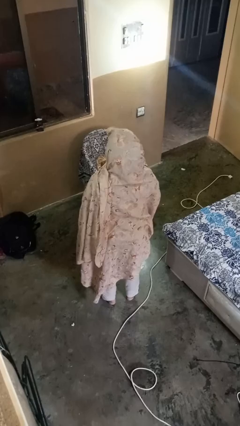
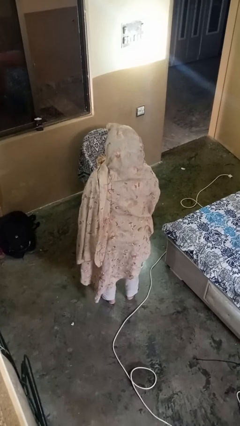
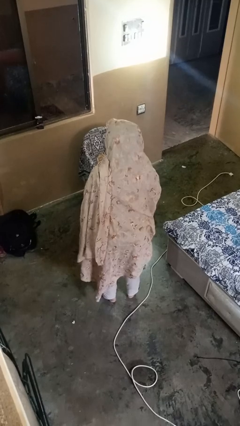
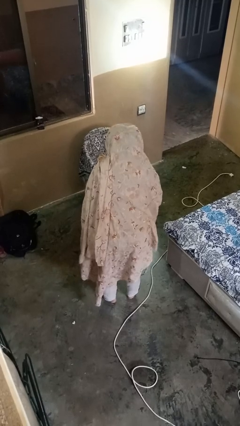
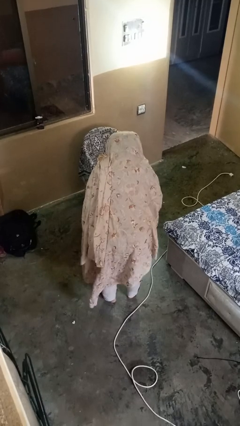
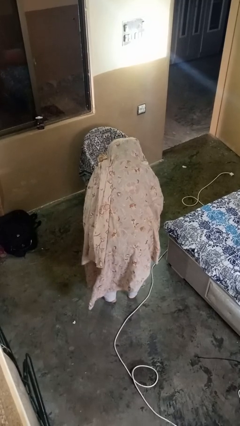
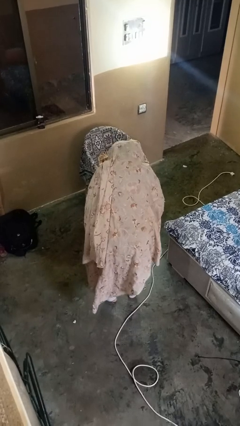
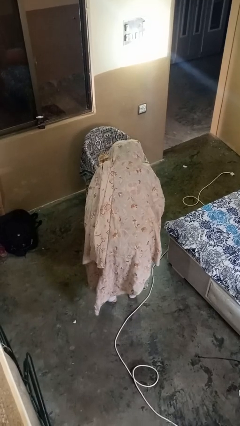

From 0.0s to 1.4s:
person bows

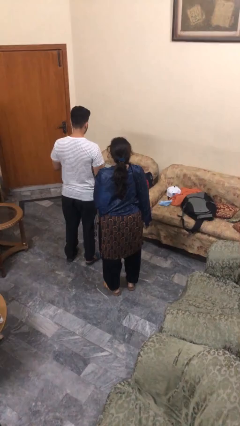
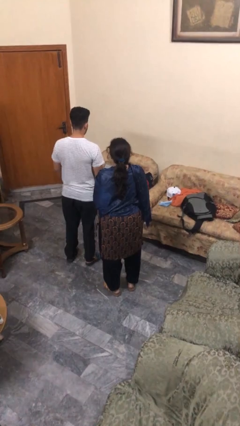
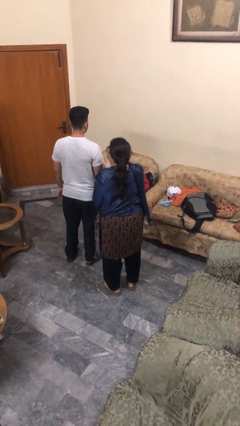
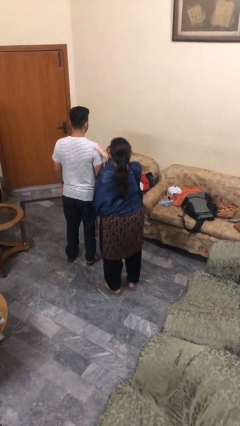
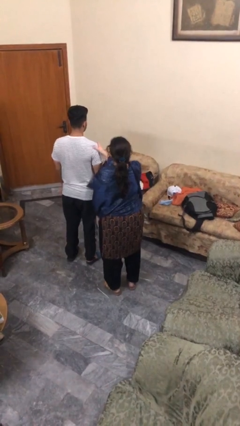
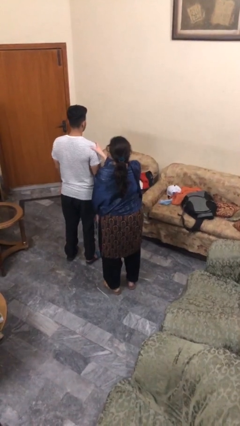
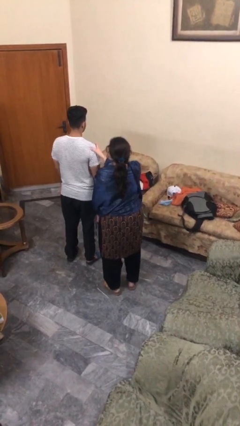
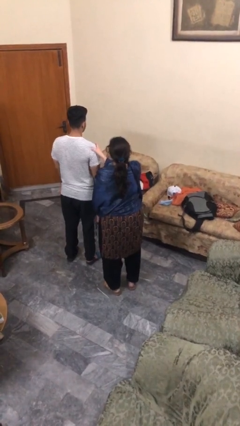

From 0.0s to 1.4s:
person grabs person by shoulder

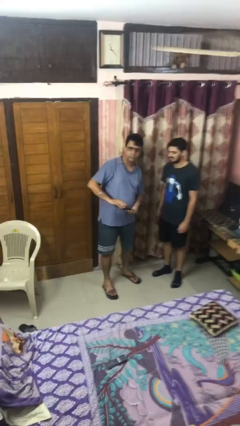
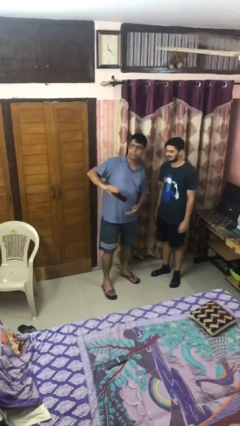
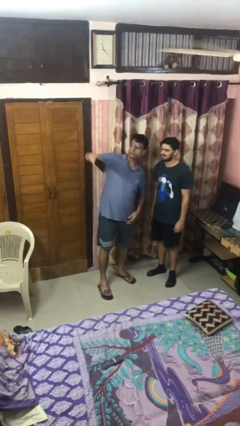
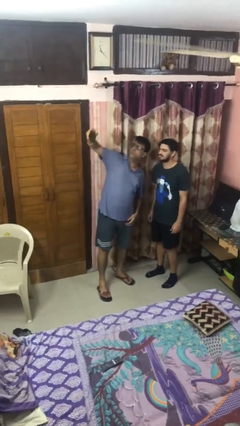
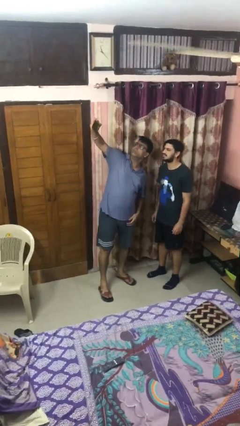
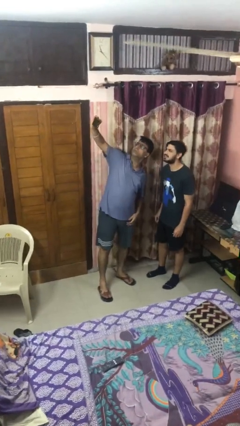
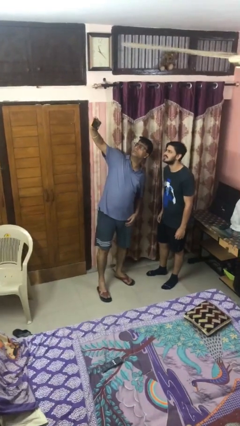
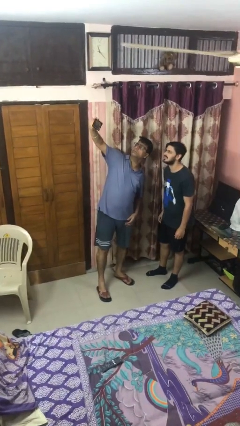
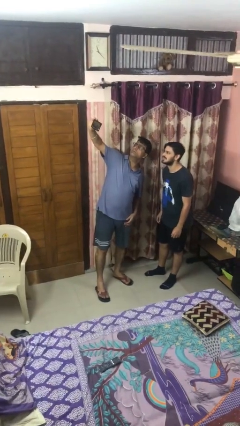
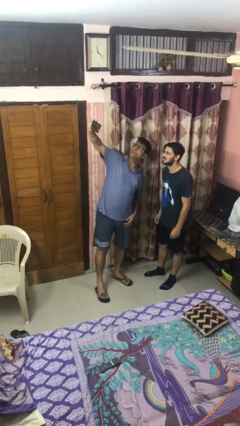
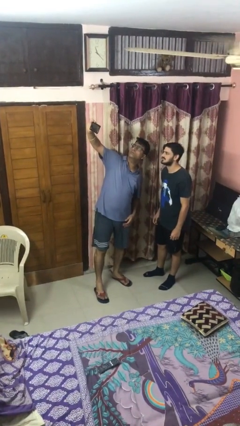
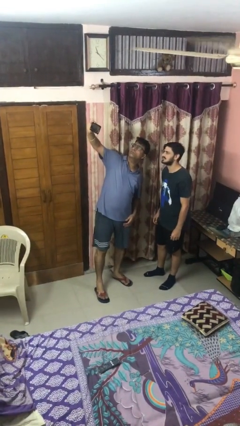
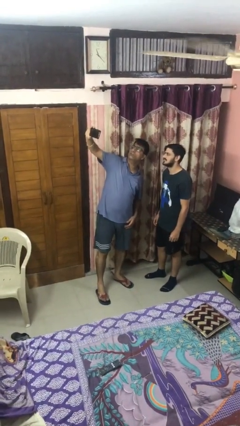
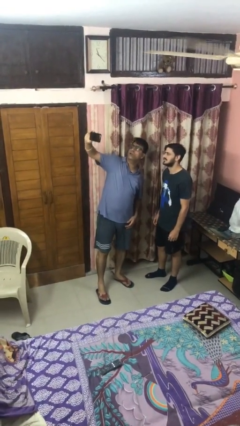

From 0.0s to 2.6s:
person takes selfie with person

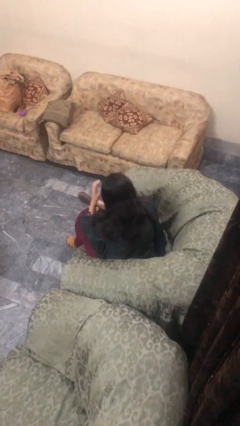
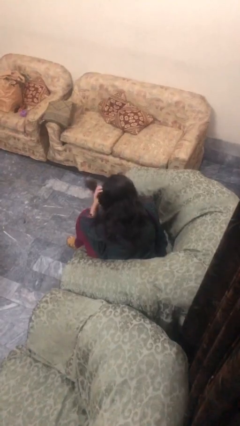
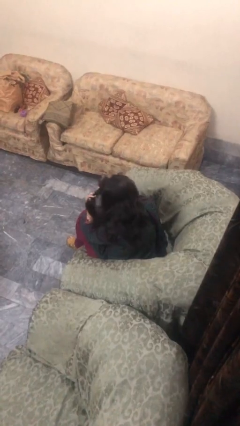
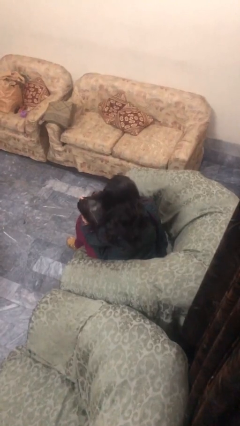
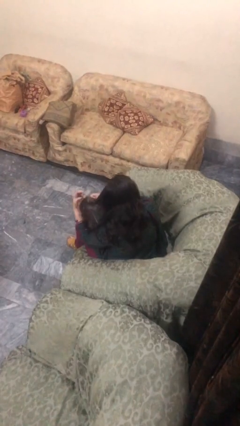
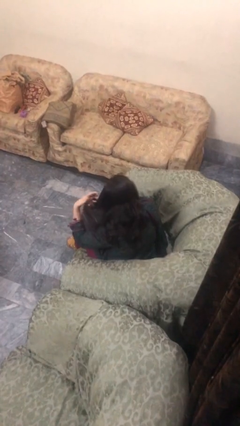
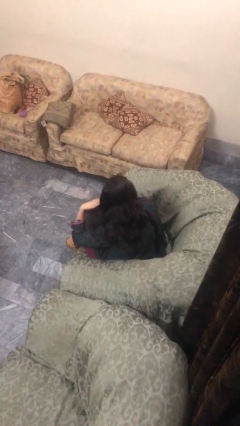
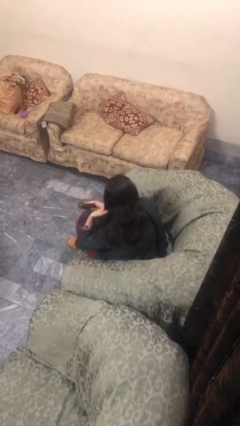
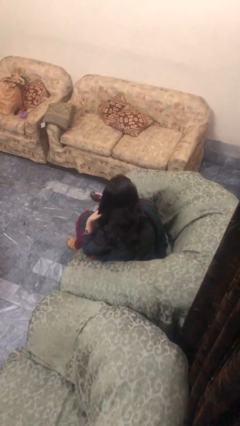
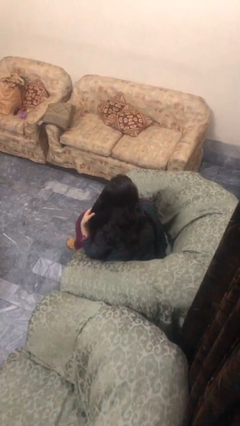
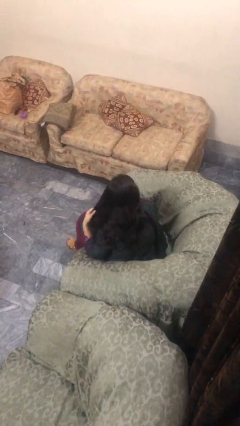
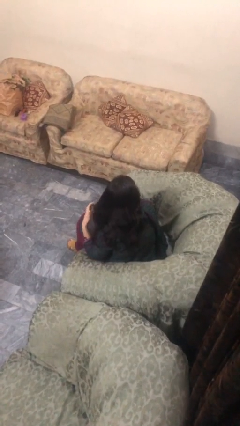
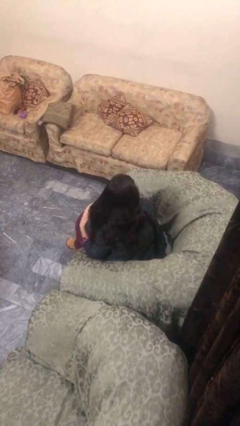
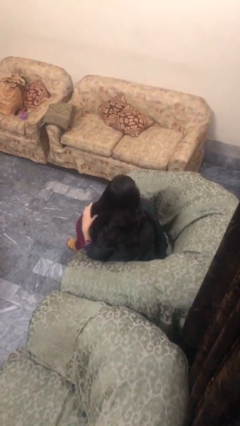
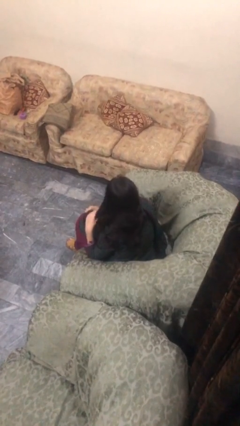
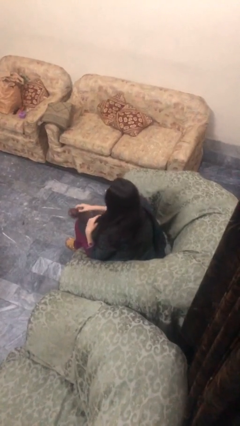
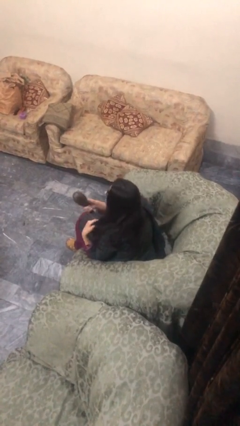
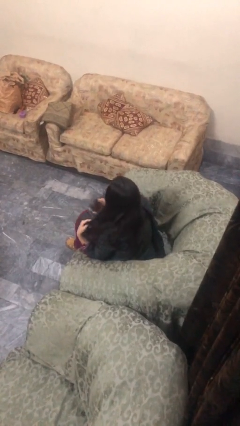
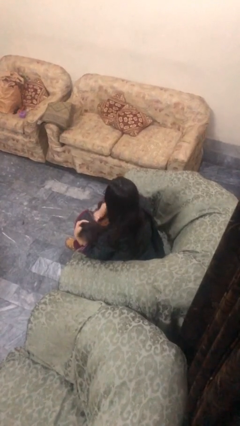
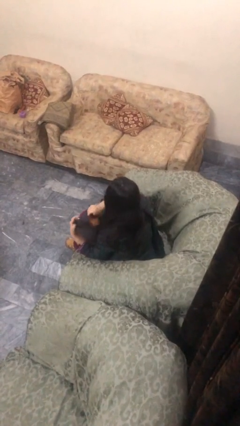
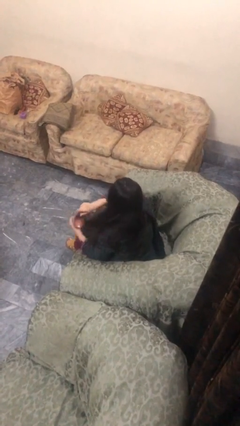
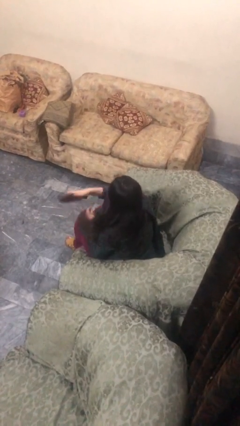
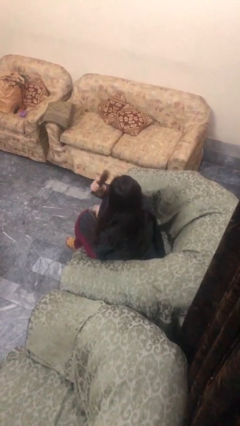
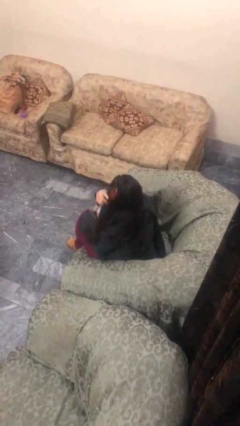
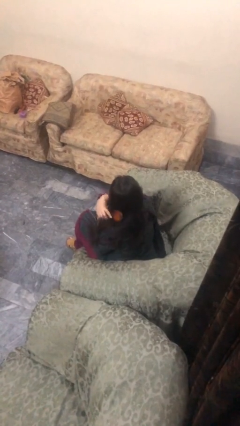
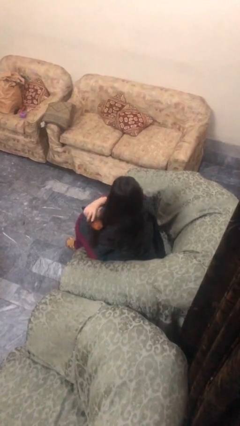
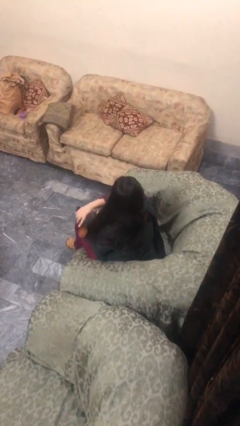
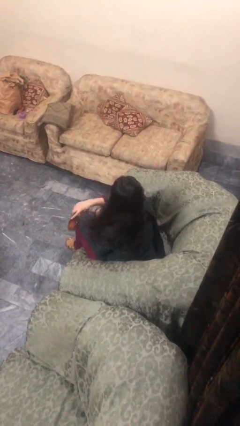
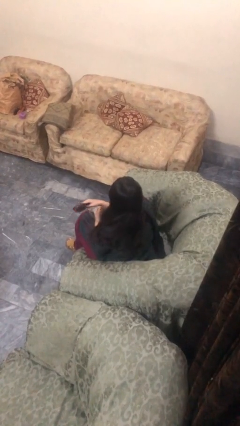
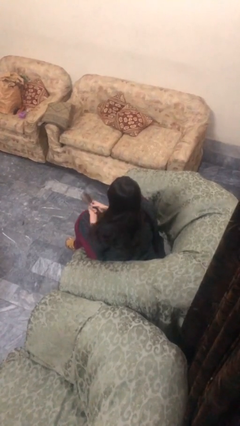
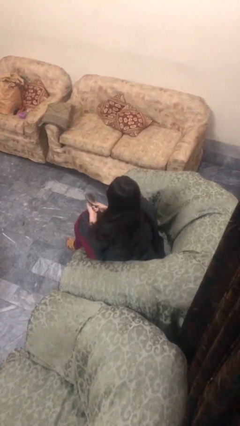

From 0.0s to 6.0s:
person brushes hair

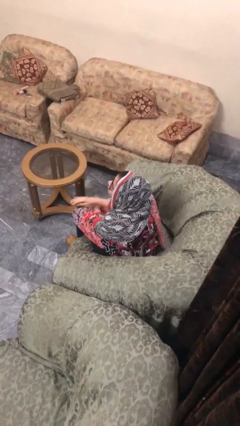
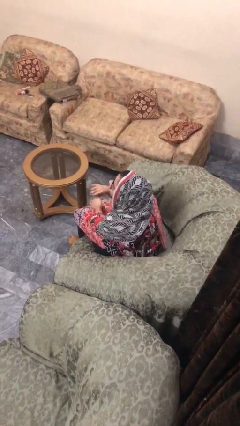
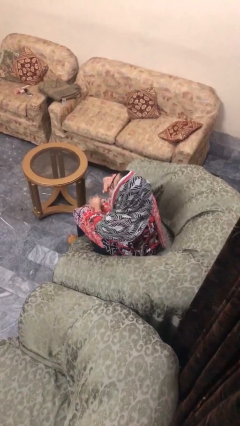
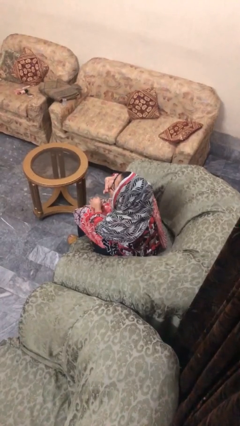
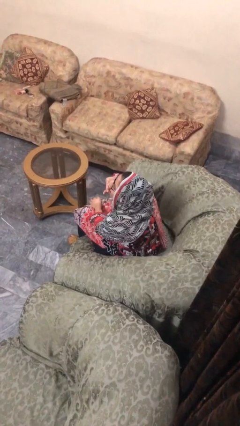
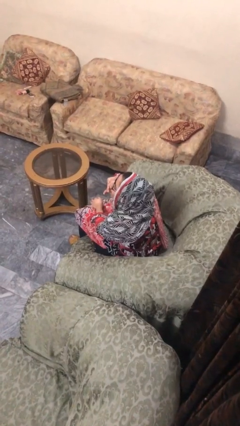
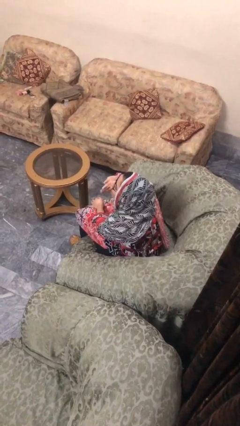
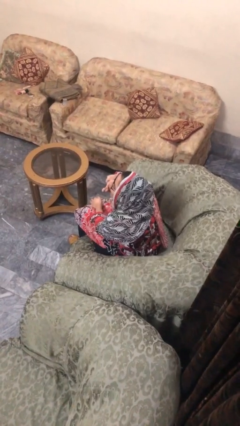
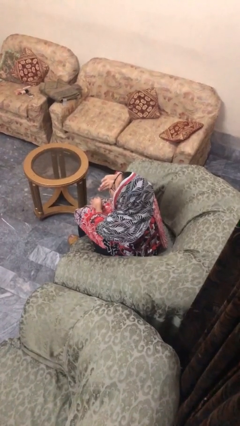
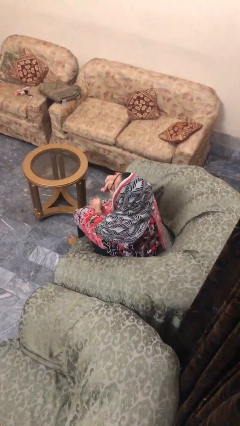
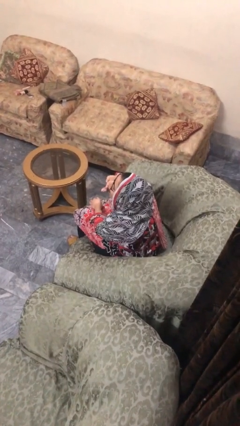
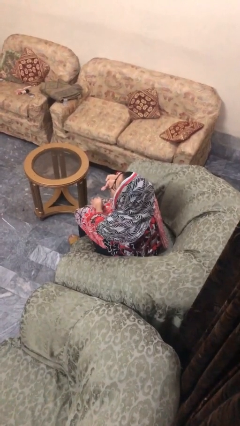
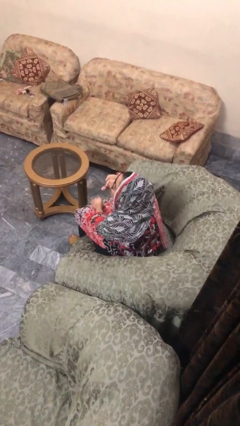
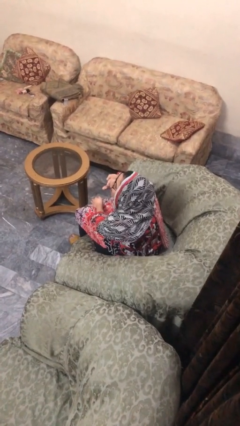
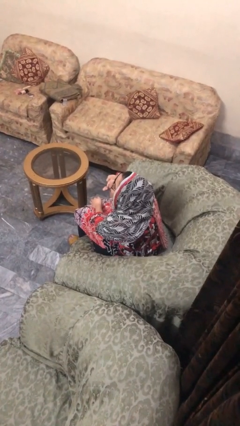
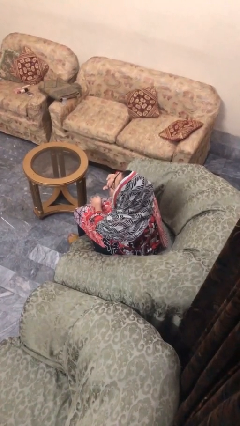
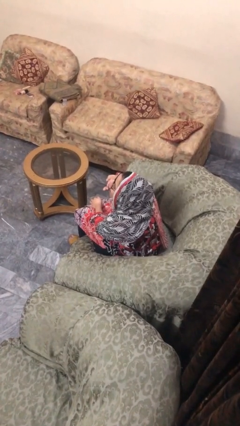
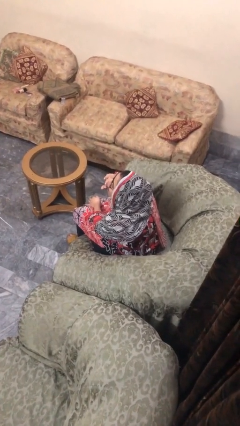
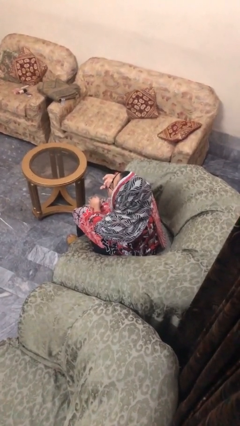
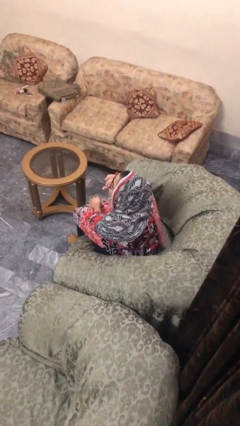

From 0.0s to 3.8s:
person yawns

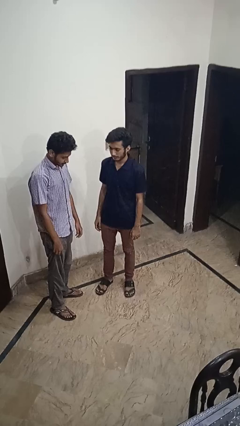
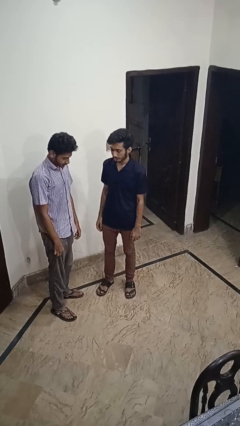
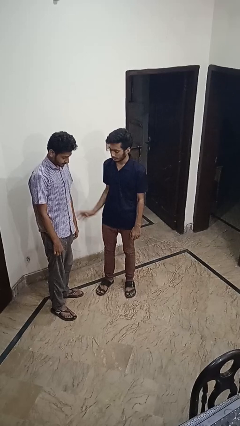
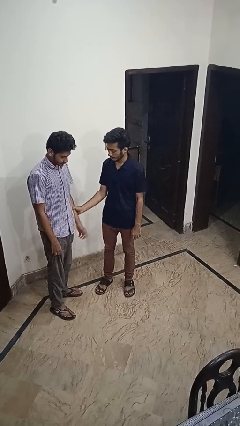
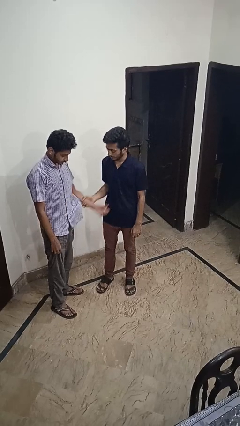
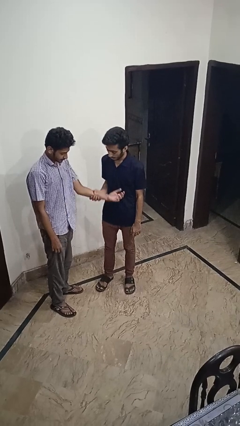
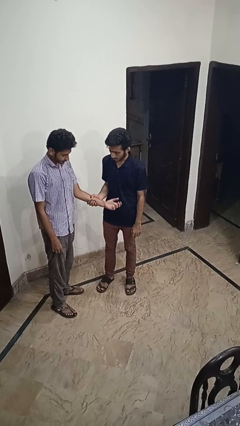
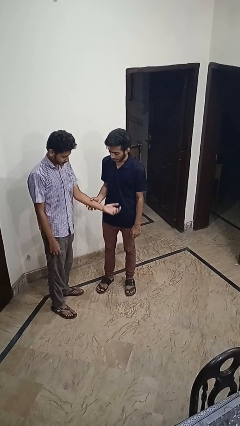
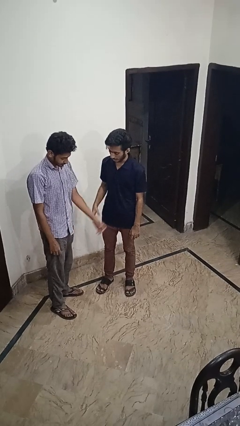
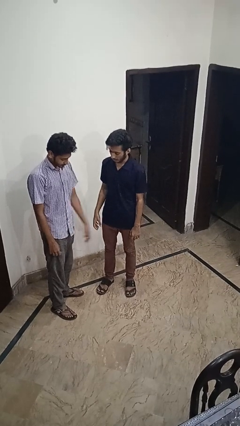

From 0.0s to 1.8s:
person grabs person by forearm

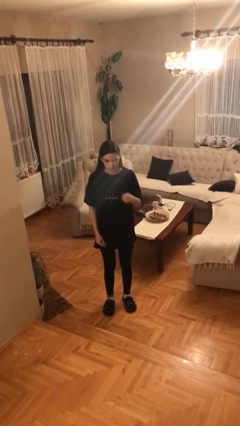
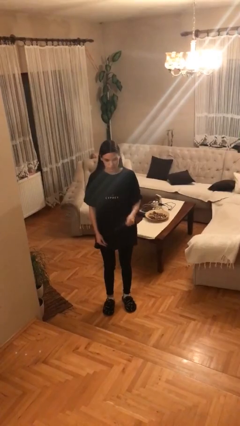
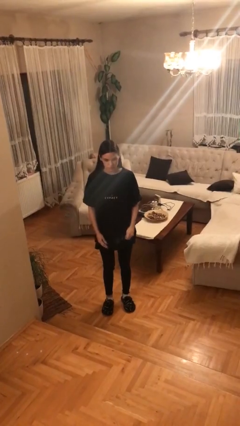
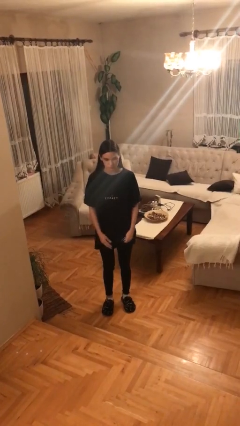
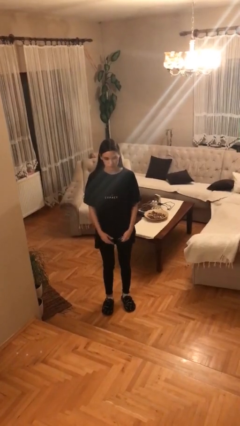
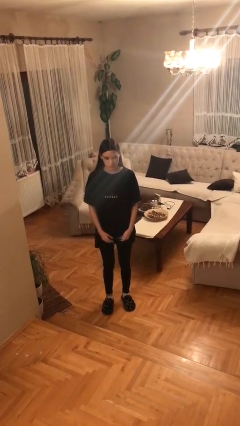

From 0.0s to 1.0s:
person takes off glasses
